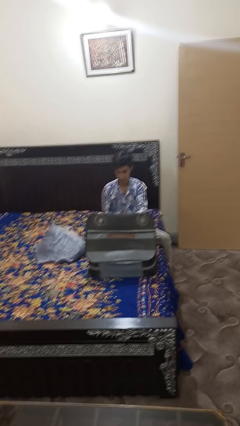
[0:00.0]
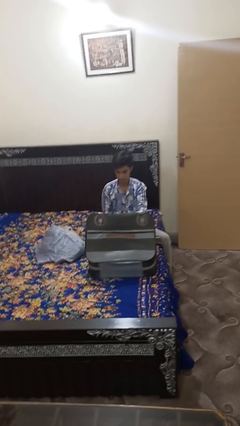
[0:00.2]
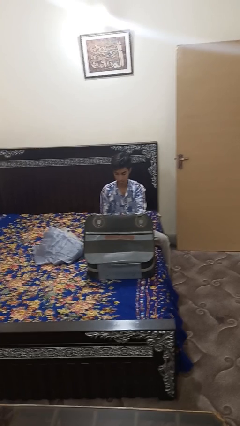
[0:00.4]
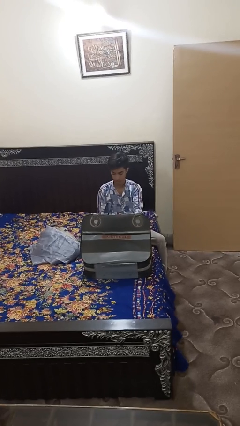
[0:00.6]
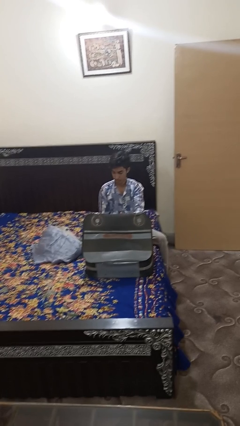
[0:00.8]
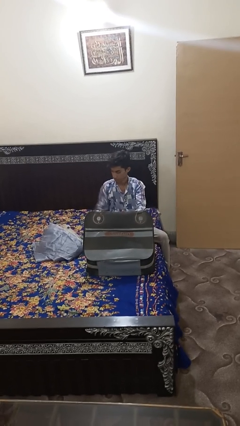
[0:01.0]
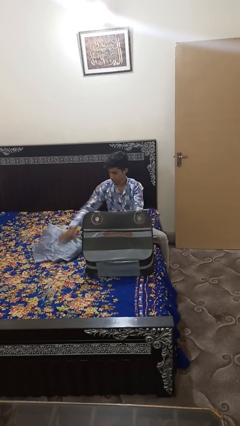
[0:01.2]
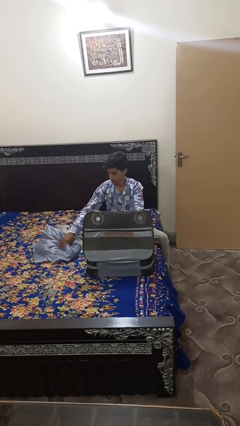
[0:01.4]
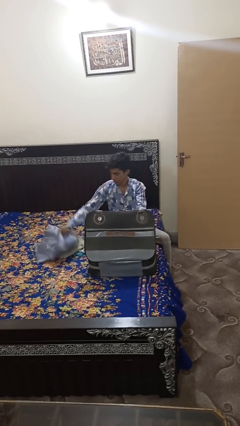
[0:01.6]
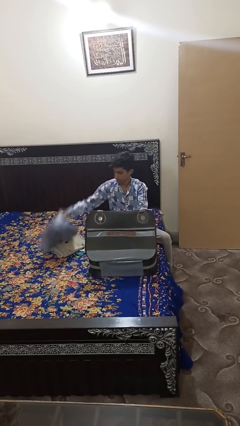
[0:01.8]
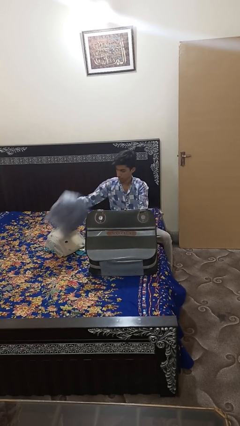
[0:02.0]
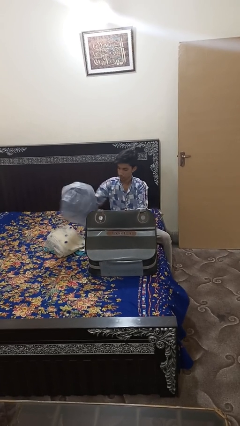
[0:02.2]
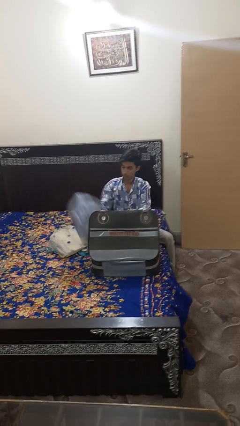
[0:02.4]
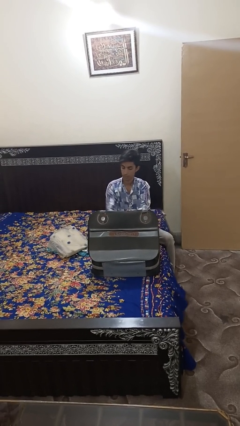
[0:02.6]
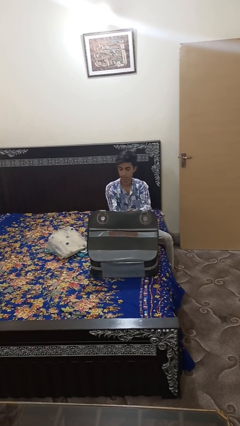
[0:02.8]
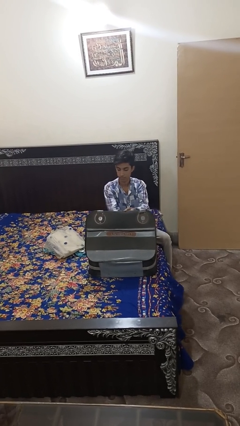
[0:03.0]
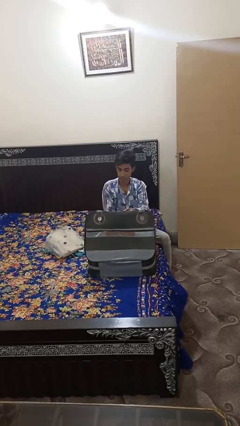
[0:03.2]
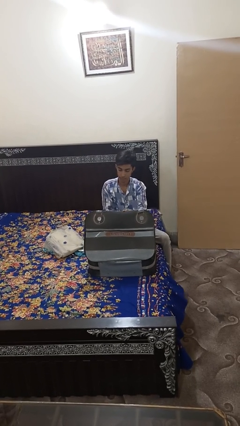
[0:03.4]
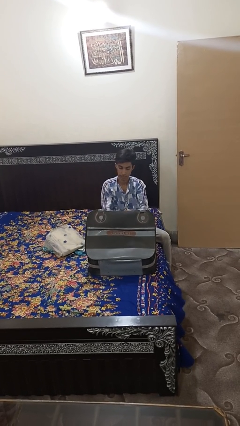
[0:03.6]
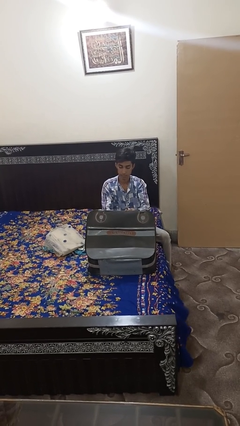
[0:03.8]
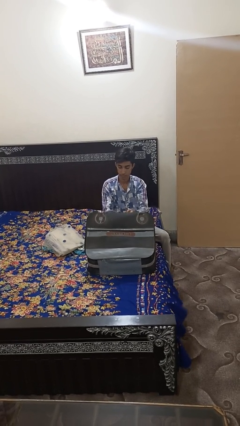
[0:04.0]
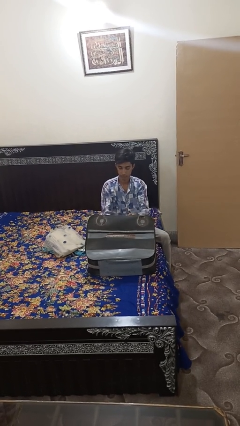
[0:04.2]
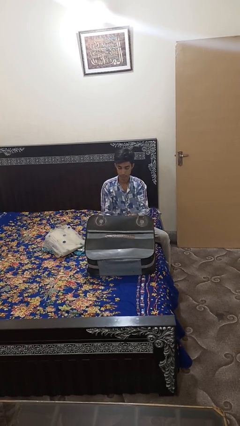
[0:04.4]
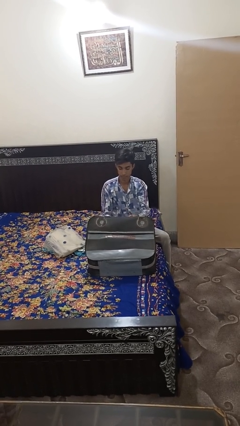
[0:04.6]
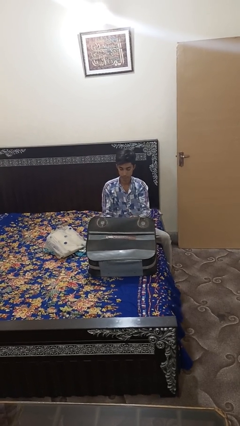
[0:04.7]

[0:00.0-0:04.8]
person loads clothes into suitcase

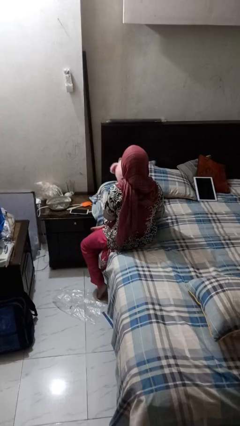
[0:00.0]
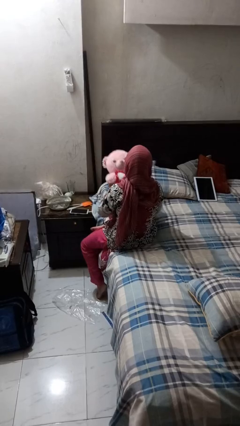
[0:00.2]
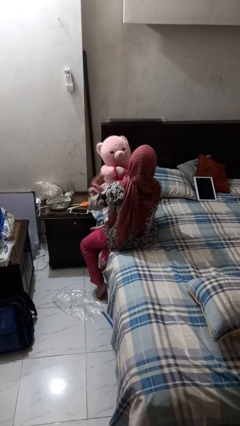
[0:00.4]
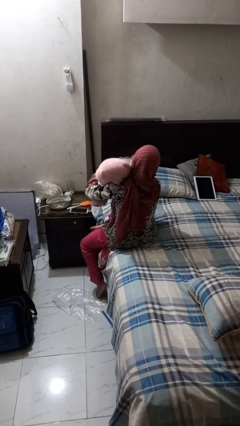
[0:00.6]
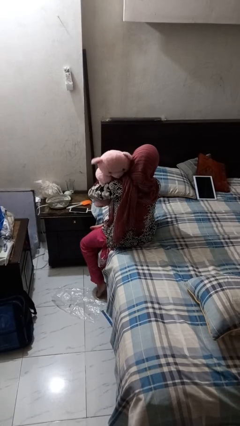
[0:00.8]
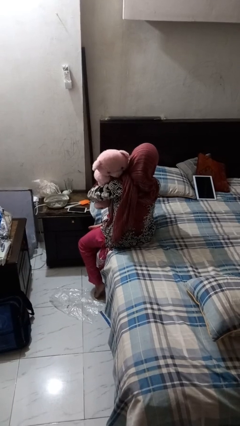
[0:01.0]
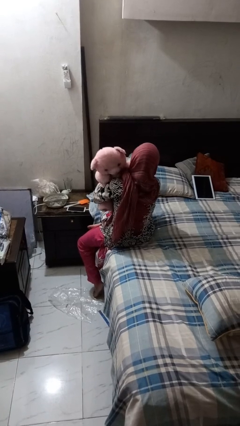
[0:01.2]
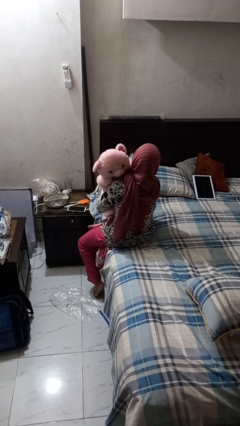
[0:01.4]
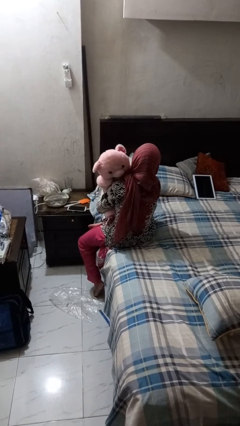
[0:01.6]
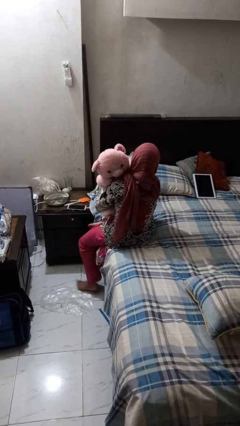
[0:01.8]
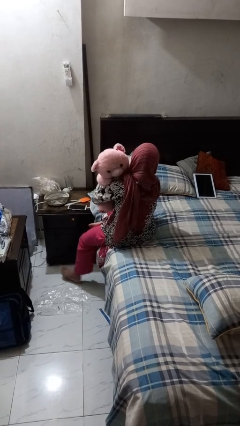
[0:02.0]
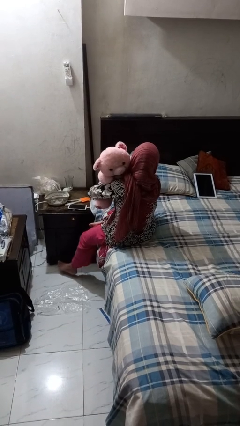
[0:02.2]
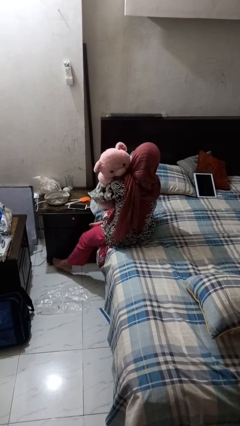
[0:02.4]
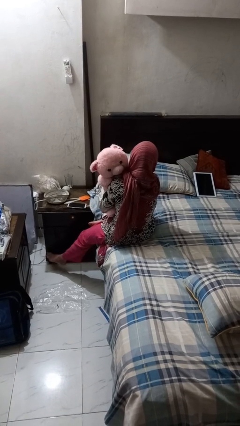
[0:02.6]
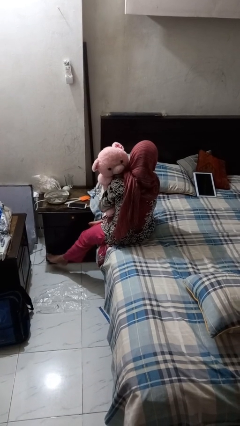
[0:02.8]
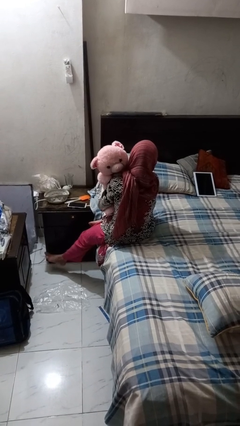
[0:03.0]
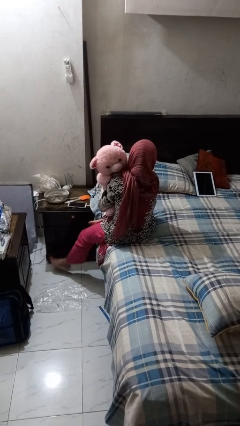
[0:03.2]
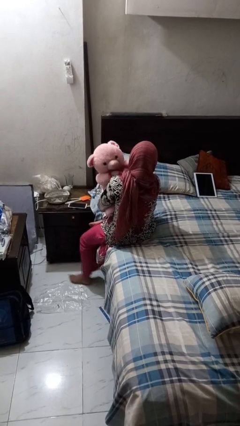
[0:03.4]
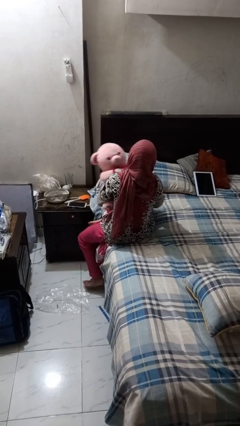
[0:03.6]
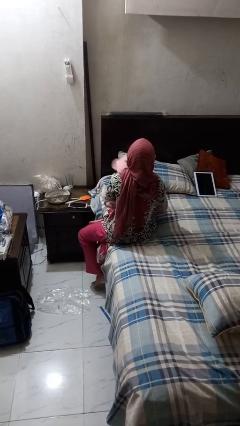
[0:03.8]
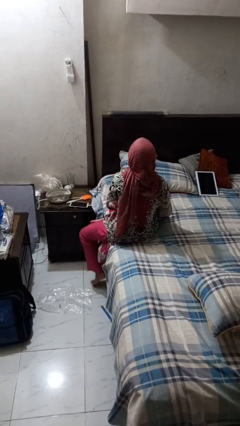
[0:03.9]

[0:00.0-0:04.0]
person hugs stuffed animal

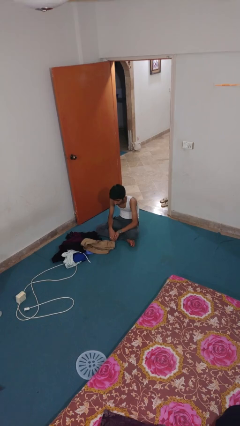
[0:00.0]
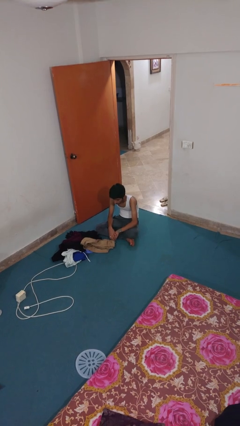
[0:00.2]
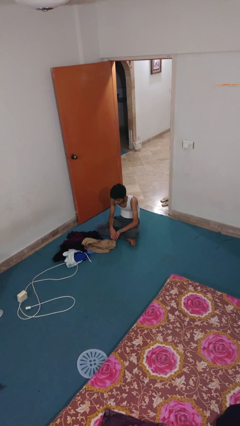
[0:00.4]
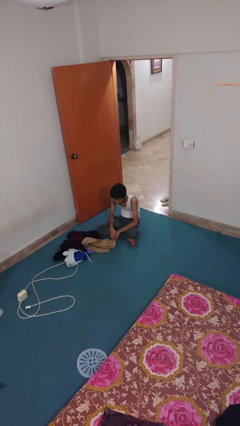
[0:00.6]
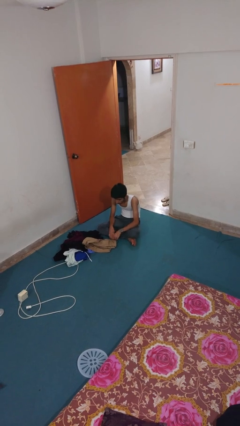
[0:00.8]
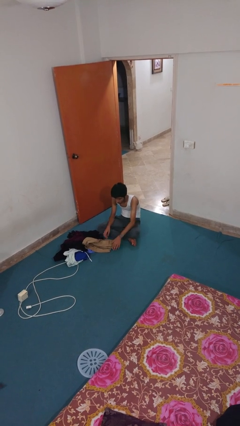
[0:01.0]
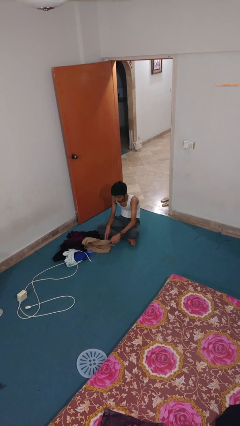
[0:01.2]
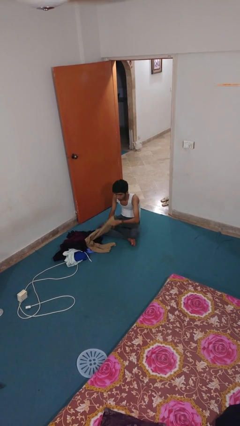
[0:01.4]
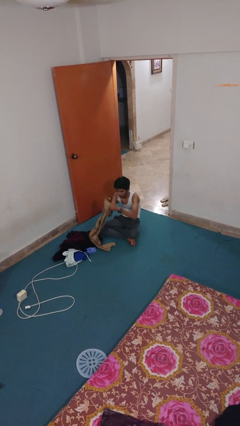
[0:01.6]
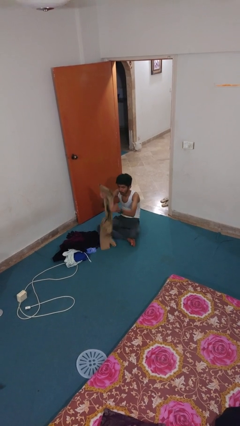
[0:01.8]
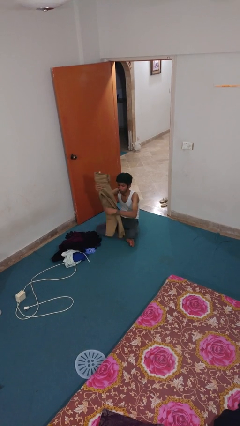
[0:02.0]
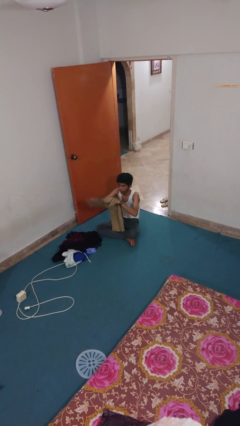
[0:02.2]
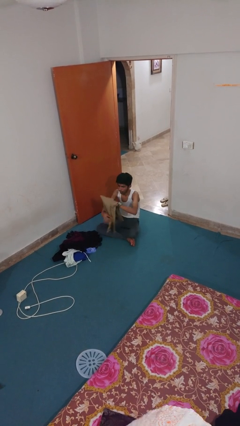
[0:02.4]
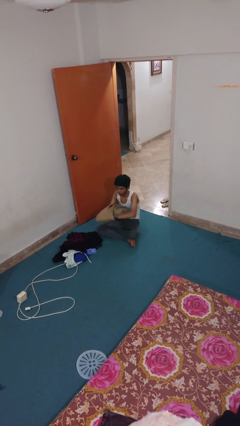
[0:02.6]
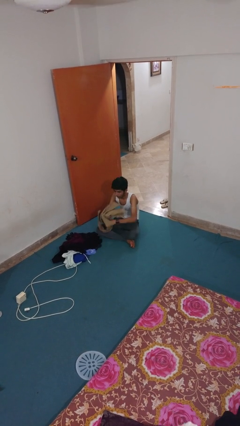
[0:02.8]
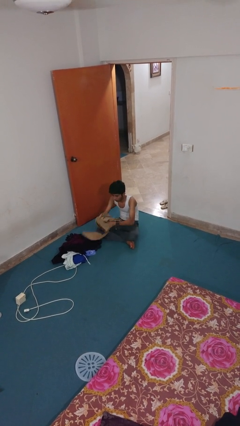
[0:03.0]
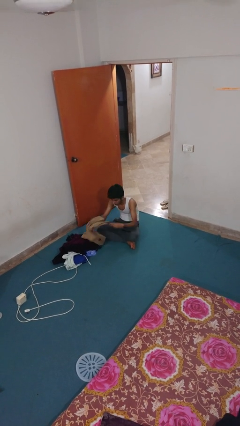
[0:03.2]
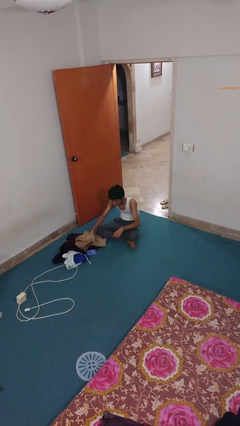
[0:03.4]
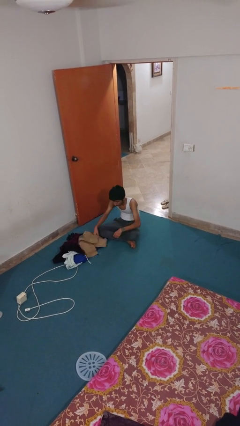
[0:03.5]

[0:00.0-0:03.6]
person folds pants

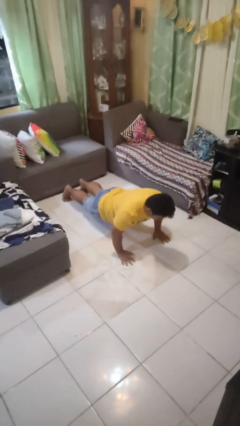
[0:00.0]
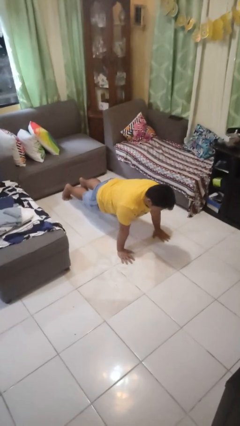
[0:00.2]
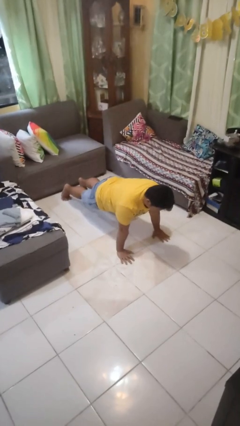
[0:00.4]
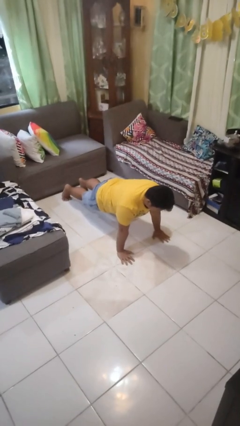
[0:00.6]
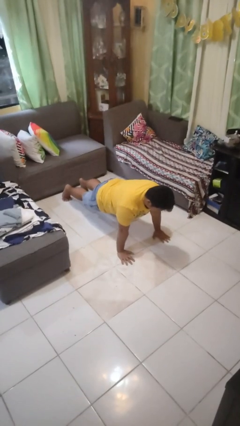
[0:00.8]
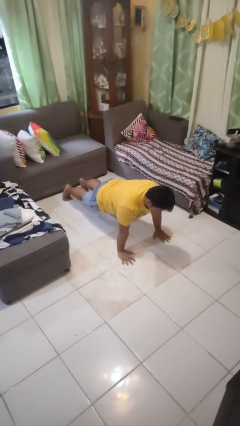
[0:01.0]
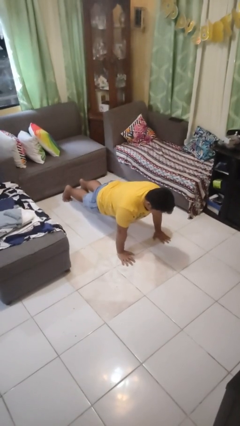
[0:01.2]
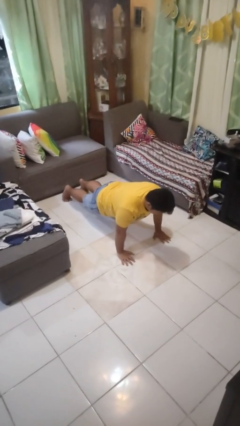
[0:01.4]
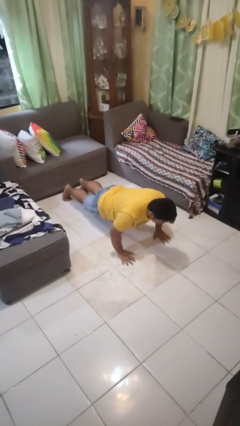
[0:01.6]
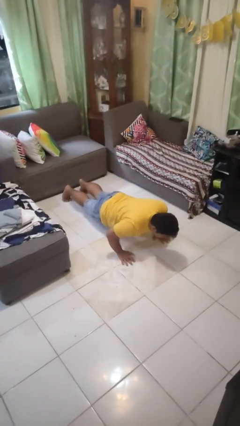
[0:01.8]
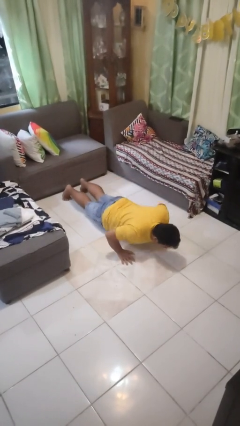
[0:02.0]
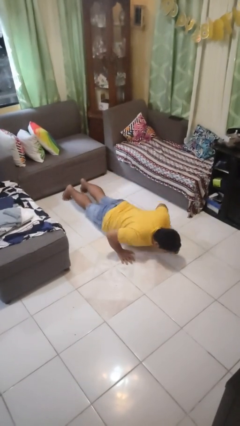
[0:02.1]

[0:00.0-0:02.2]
person exercises with pushup

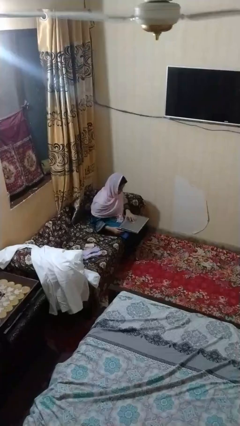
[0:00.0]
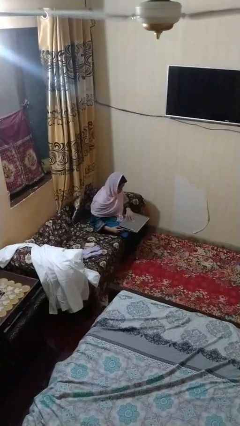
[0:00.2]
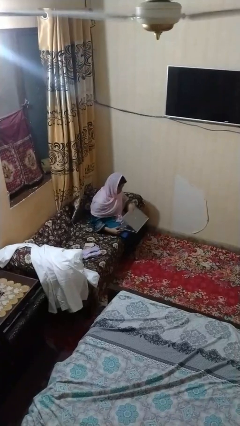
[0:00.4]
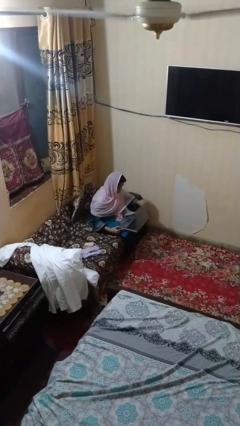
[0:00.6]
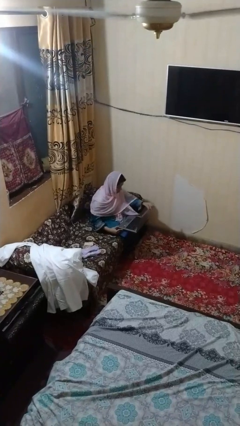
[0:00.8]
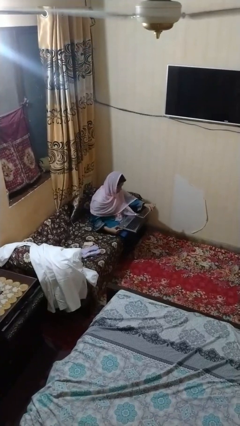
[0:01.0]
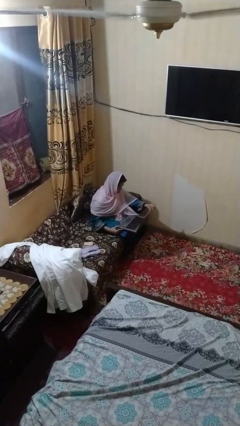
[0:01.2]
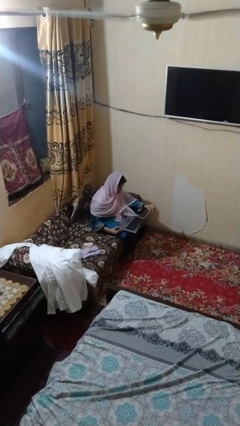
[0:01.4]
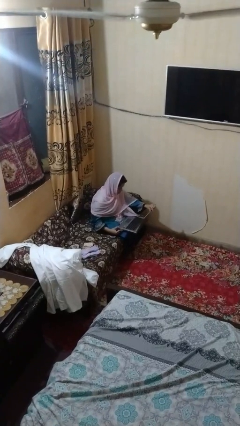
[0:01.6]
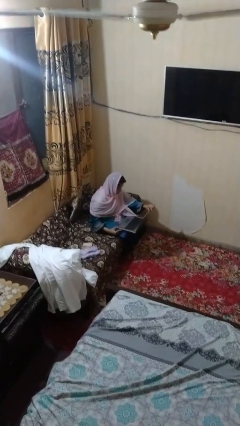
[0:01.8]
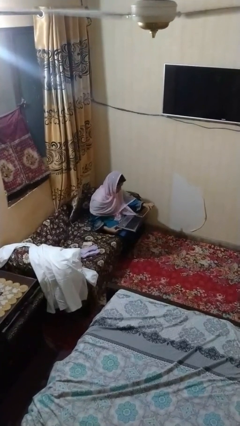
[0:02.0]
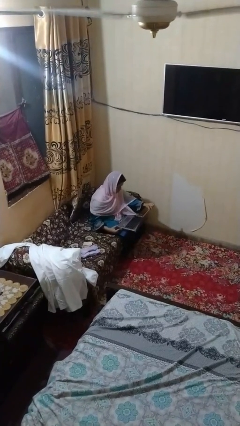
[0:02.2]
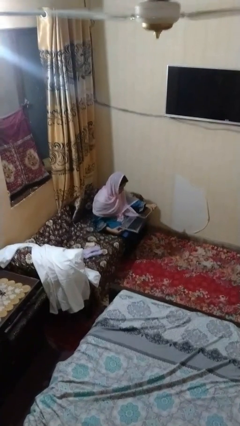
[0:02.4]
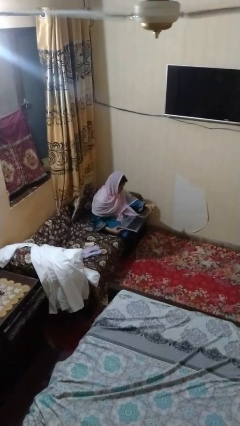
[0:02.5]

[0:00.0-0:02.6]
person opens laptop

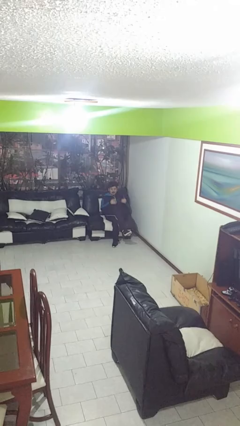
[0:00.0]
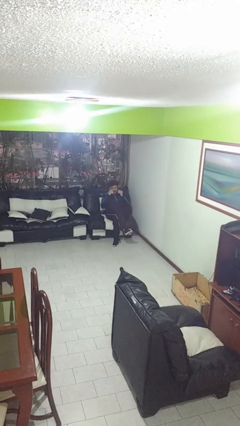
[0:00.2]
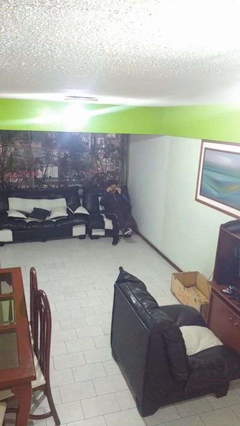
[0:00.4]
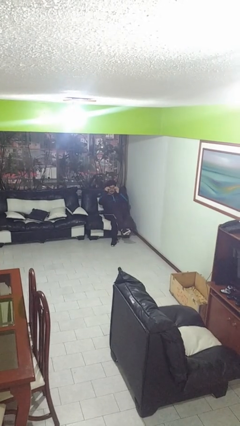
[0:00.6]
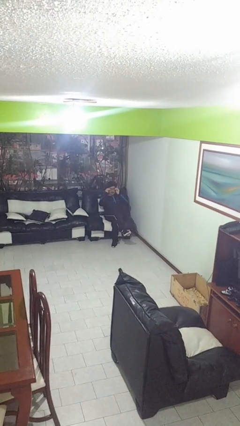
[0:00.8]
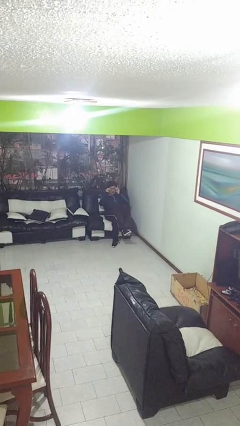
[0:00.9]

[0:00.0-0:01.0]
person puts on glasses
